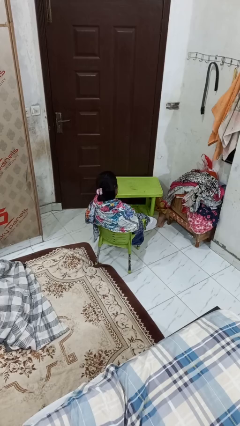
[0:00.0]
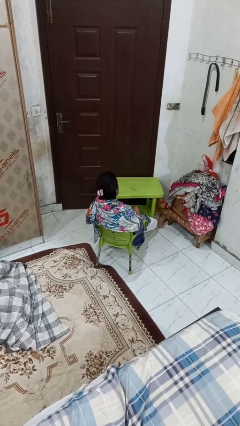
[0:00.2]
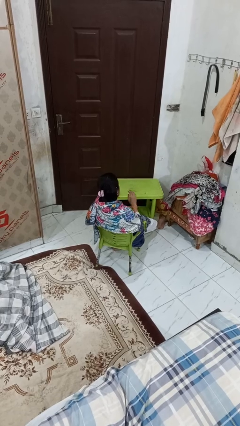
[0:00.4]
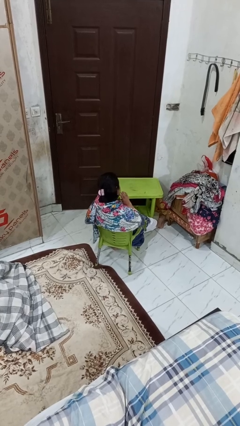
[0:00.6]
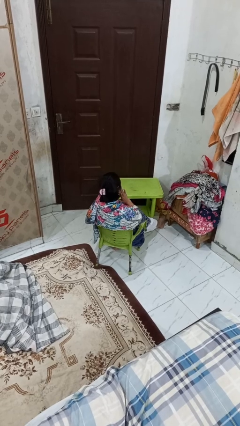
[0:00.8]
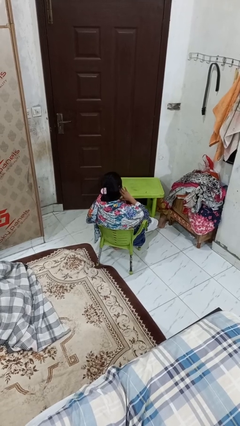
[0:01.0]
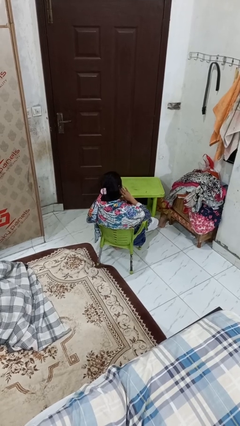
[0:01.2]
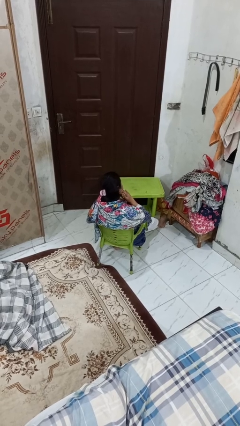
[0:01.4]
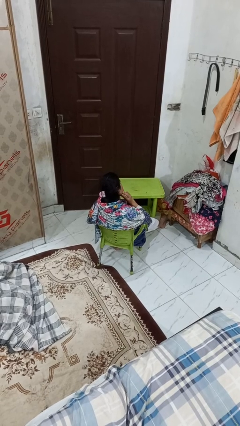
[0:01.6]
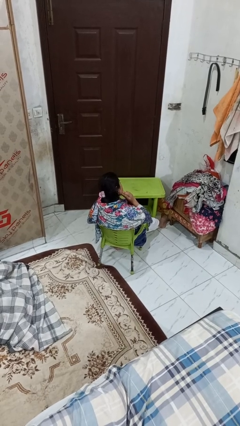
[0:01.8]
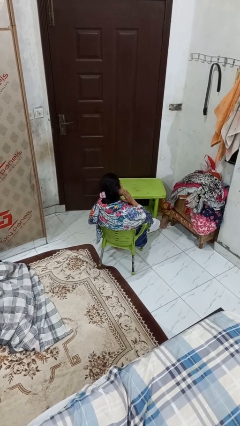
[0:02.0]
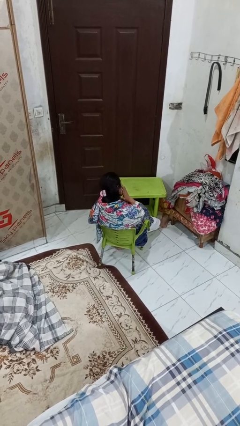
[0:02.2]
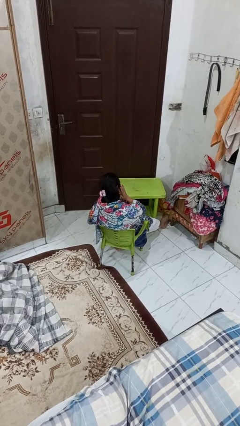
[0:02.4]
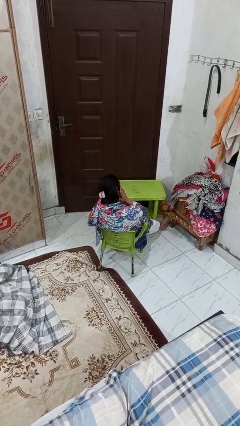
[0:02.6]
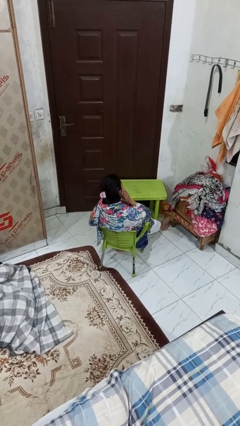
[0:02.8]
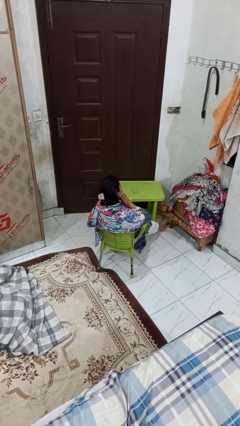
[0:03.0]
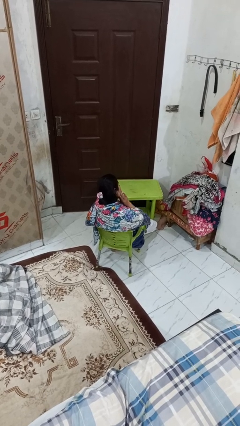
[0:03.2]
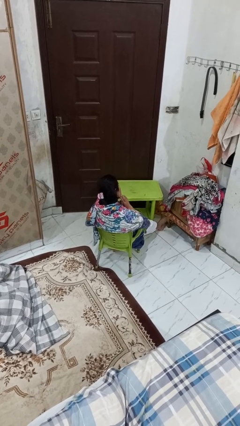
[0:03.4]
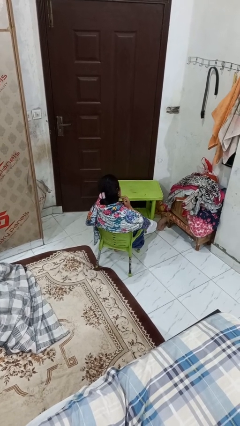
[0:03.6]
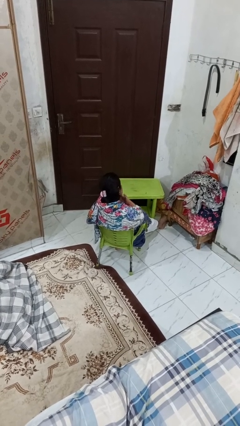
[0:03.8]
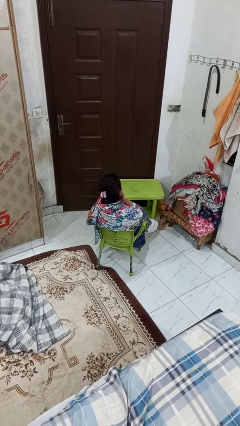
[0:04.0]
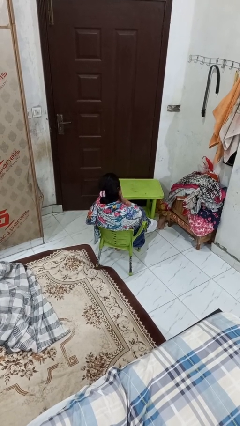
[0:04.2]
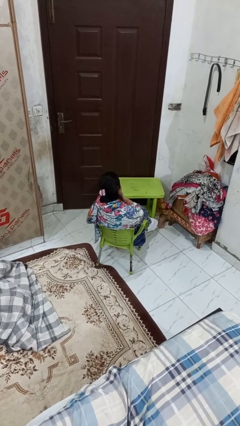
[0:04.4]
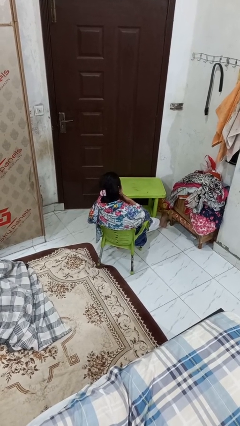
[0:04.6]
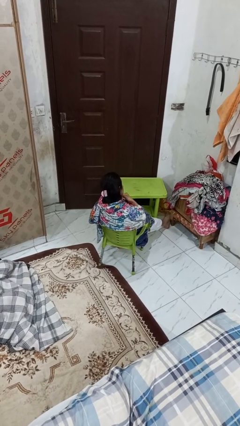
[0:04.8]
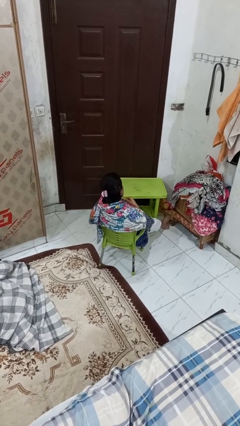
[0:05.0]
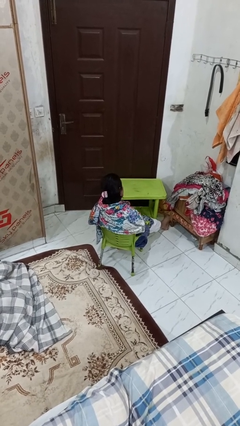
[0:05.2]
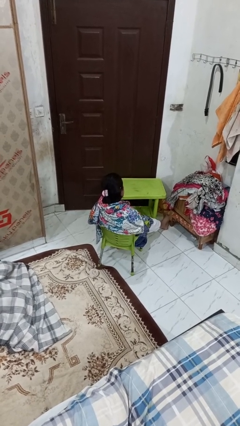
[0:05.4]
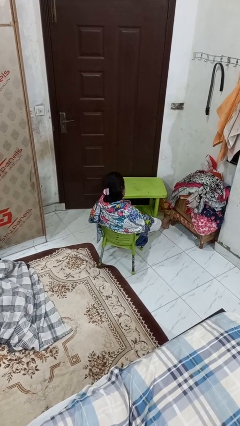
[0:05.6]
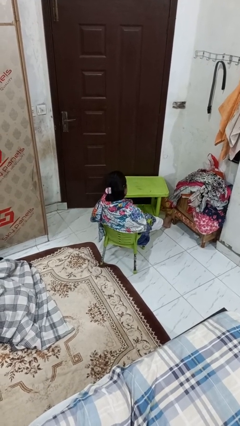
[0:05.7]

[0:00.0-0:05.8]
person strokes chin

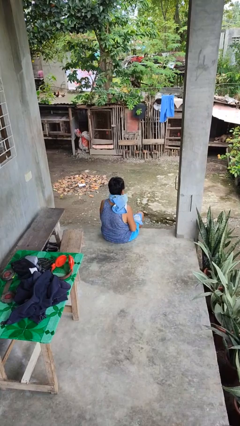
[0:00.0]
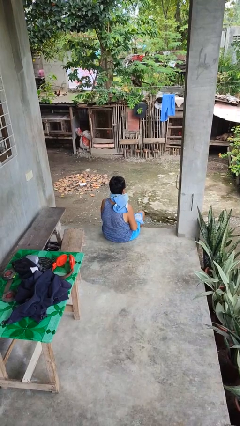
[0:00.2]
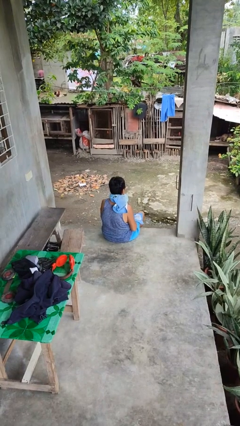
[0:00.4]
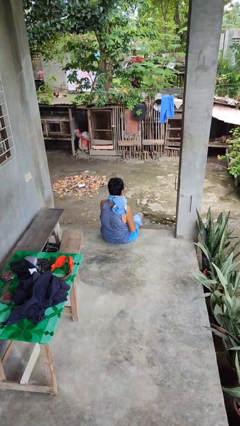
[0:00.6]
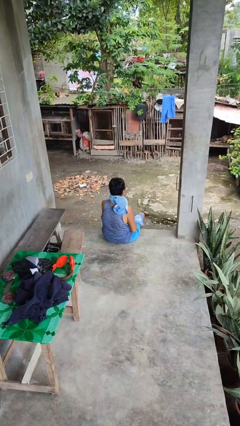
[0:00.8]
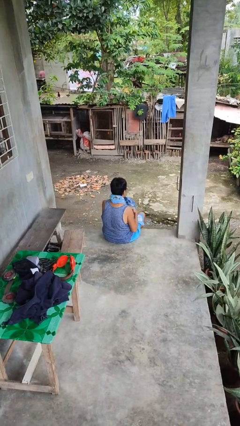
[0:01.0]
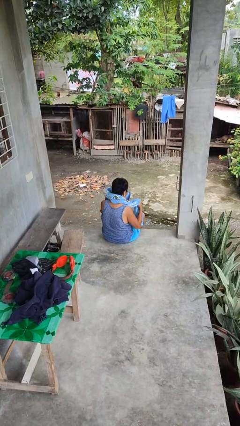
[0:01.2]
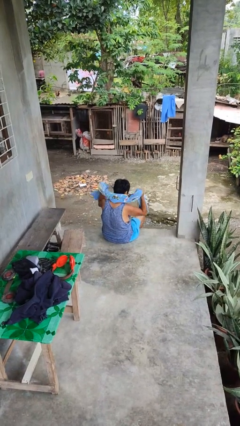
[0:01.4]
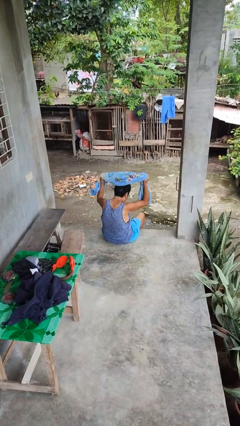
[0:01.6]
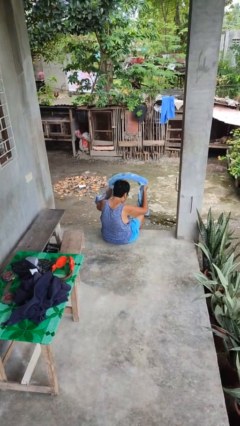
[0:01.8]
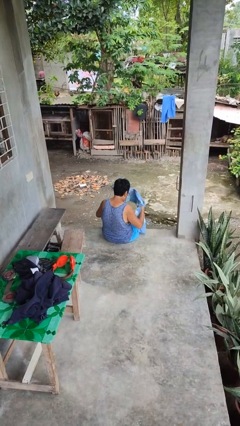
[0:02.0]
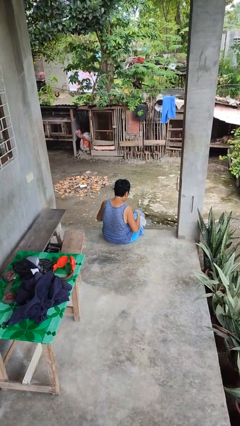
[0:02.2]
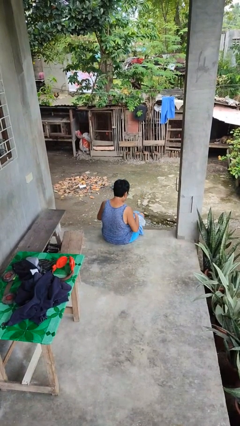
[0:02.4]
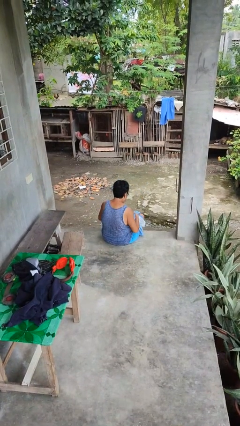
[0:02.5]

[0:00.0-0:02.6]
person takes off scarf

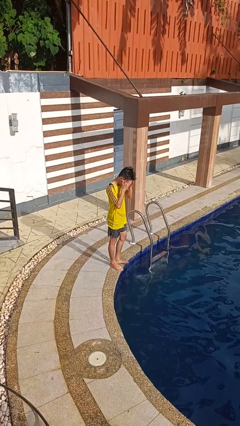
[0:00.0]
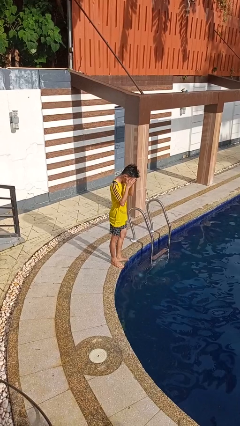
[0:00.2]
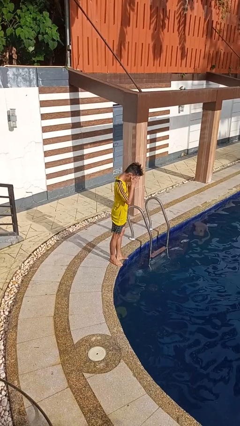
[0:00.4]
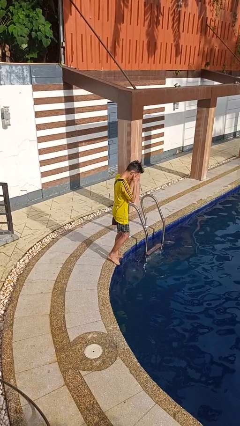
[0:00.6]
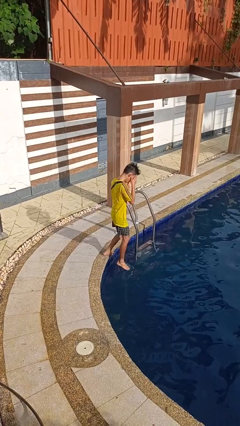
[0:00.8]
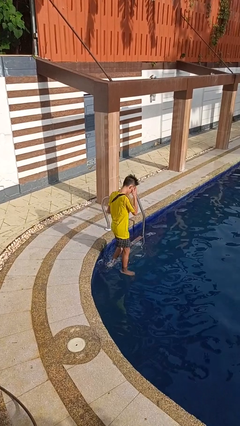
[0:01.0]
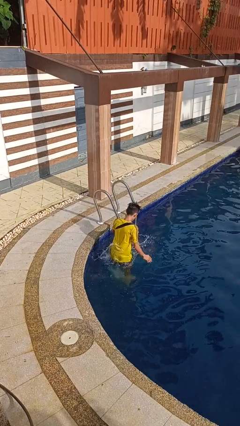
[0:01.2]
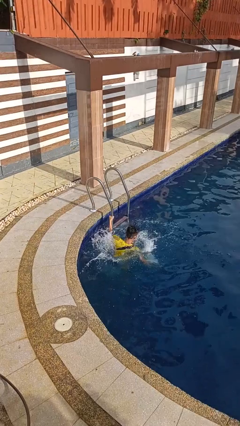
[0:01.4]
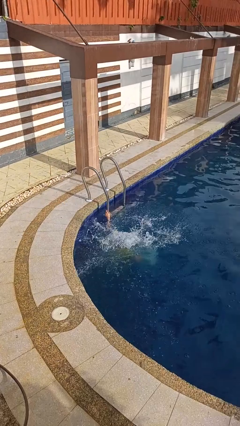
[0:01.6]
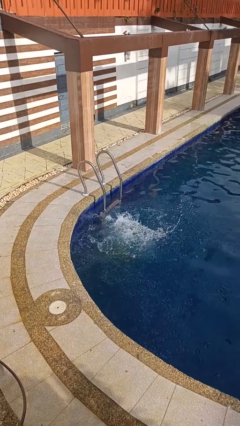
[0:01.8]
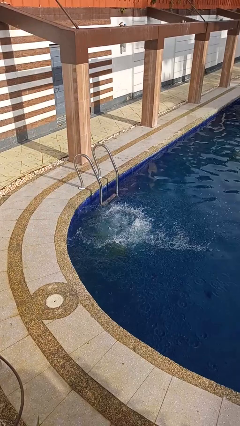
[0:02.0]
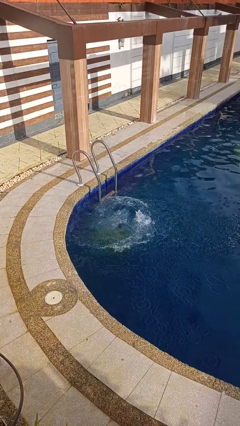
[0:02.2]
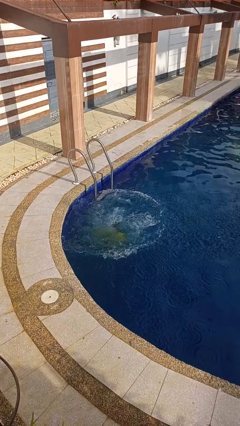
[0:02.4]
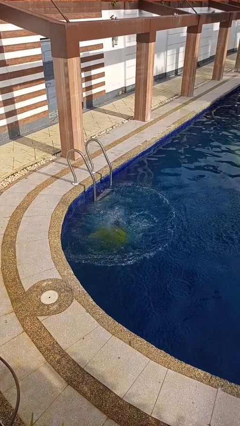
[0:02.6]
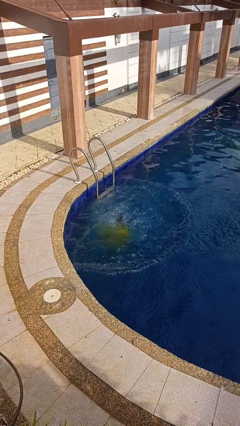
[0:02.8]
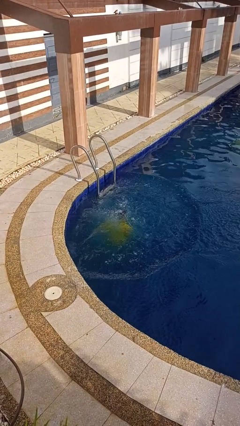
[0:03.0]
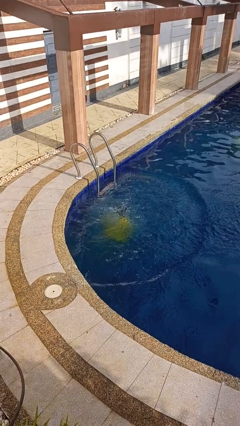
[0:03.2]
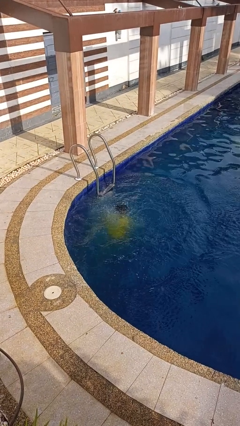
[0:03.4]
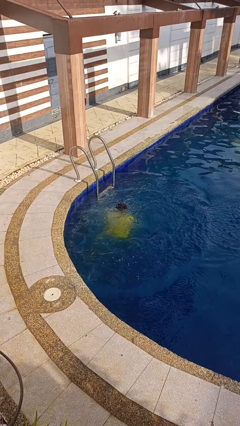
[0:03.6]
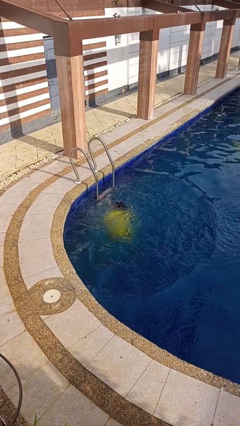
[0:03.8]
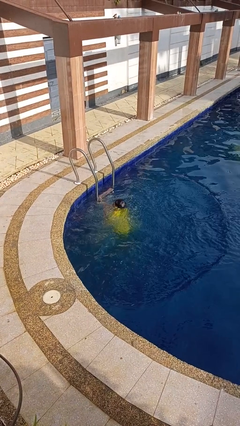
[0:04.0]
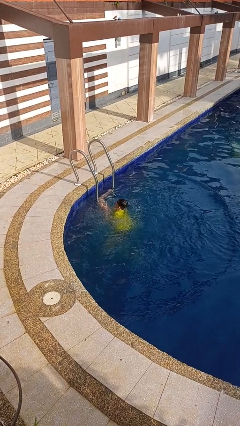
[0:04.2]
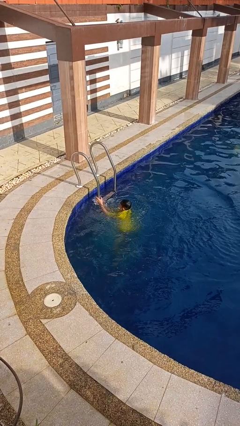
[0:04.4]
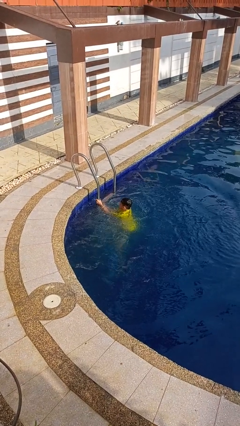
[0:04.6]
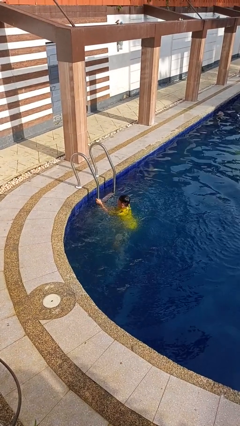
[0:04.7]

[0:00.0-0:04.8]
person falls into pool

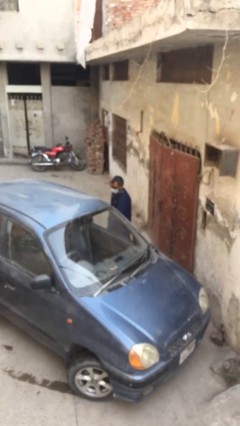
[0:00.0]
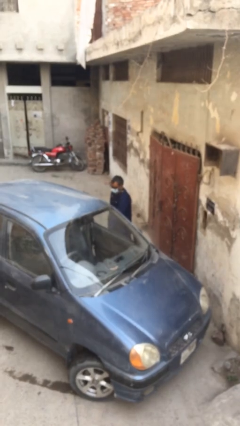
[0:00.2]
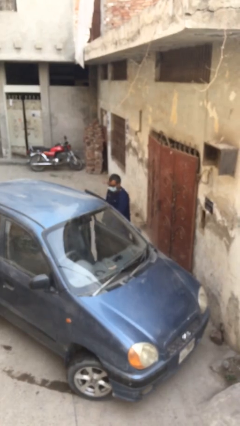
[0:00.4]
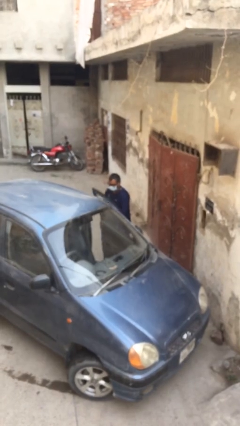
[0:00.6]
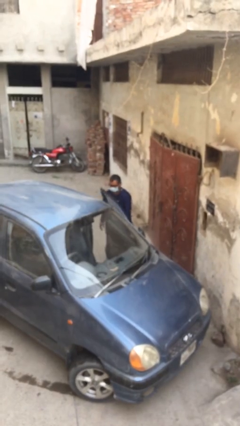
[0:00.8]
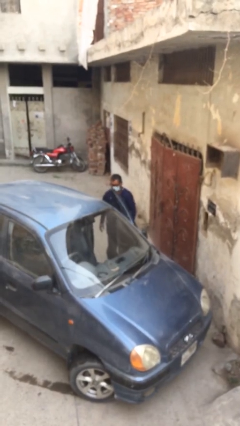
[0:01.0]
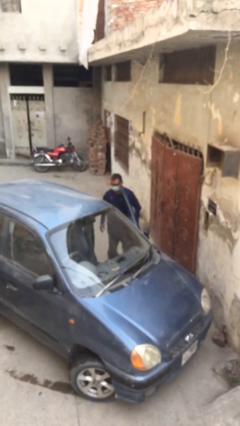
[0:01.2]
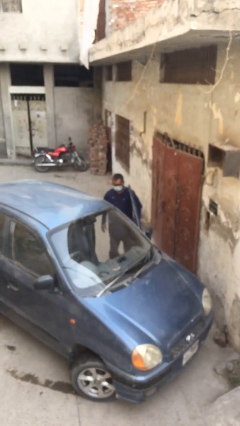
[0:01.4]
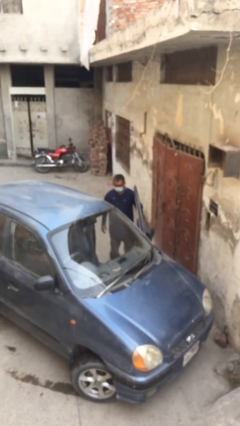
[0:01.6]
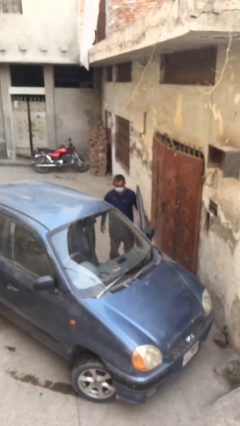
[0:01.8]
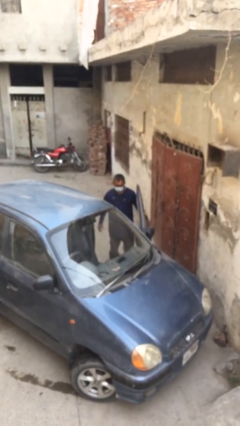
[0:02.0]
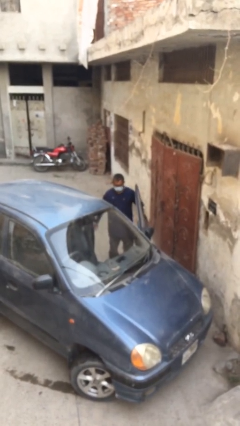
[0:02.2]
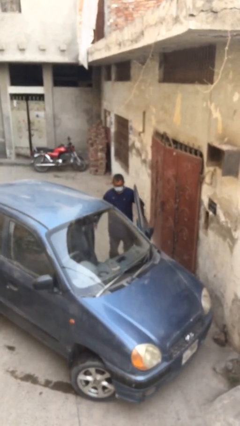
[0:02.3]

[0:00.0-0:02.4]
person opens car door

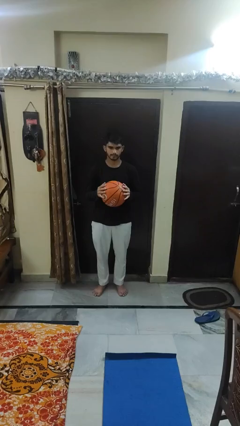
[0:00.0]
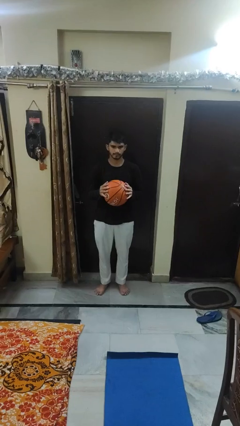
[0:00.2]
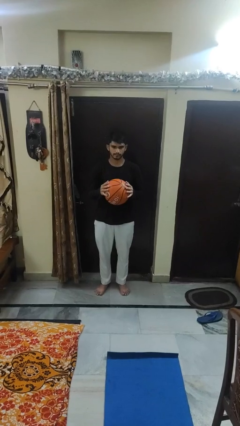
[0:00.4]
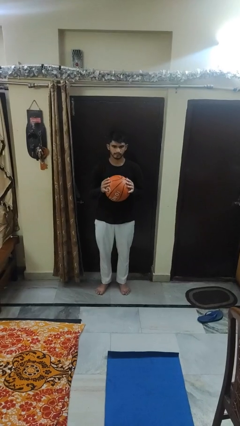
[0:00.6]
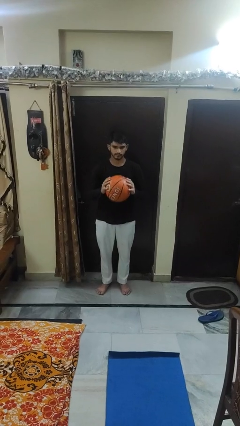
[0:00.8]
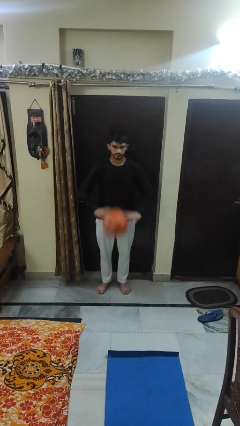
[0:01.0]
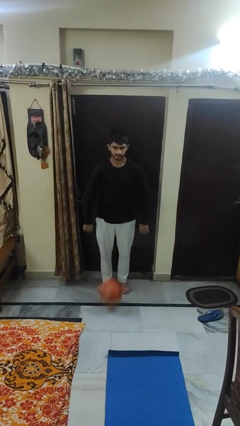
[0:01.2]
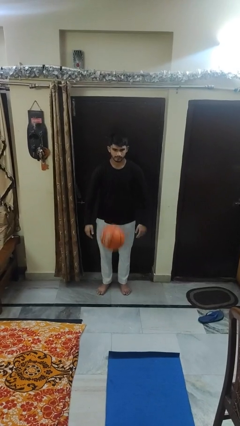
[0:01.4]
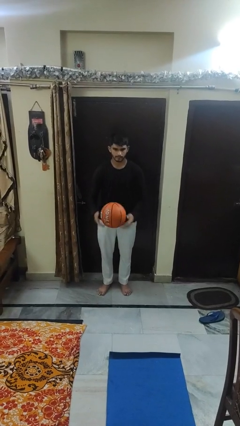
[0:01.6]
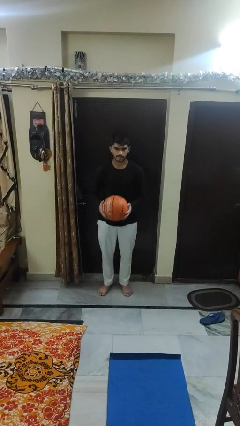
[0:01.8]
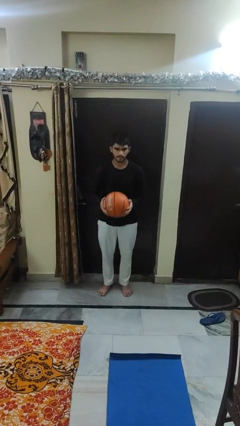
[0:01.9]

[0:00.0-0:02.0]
person bounces ball on floor
